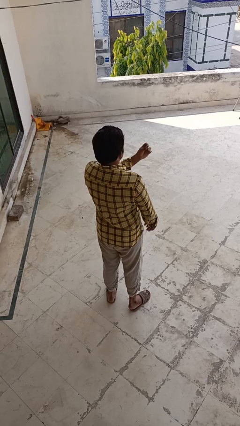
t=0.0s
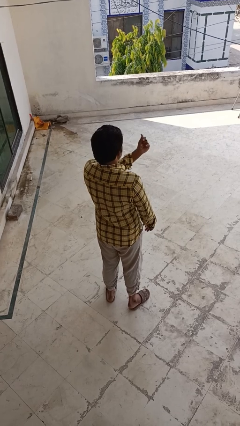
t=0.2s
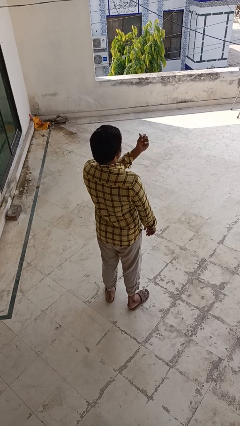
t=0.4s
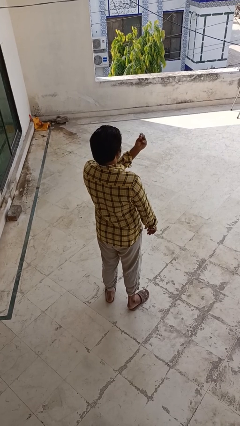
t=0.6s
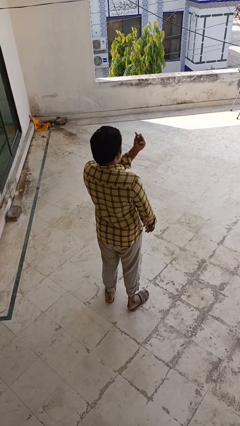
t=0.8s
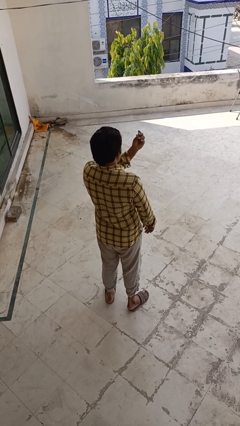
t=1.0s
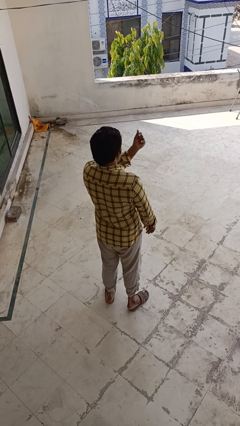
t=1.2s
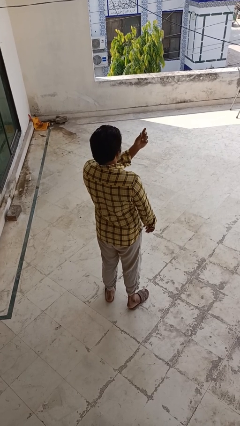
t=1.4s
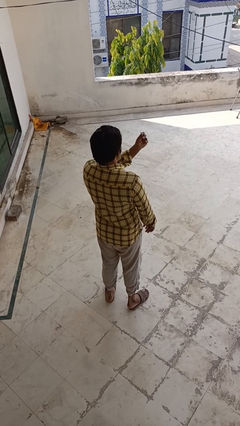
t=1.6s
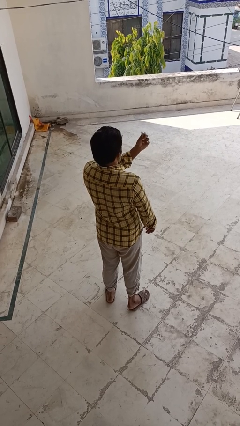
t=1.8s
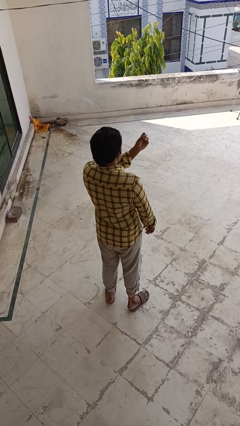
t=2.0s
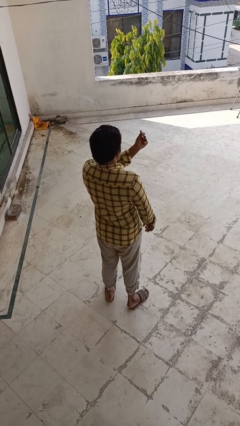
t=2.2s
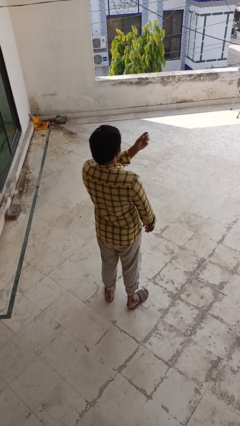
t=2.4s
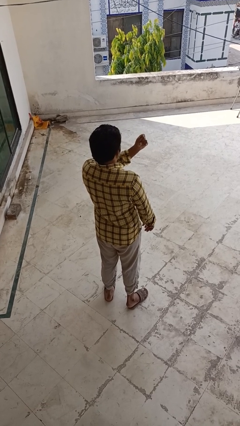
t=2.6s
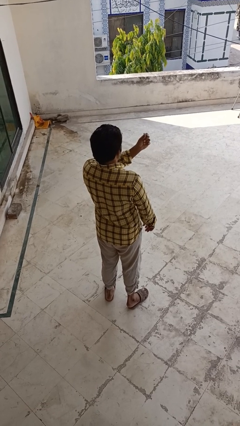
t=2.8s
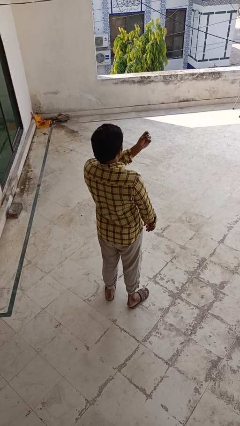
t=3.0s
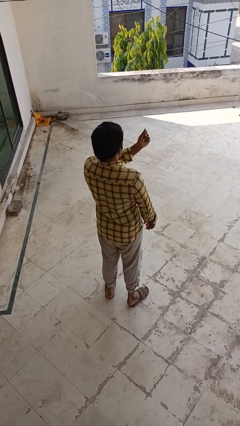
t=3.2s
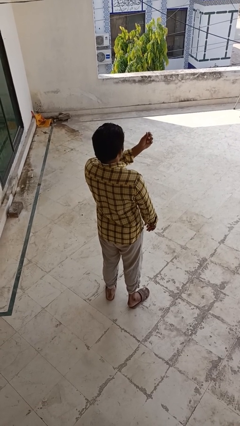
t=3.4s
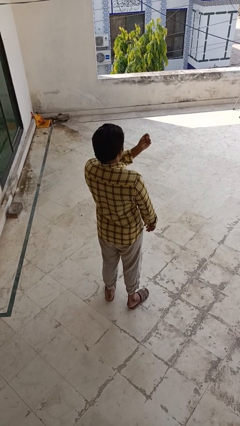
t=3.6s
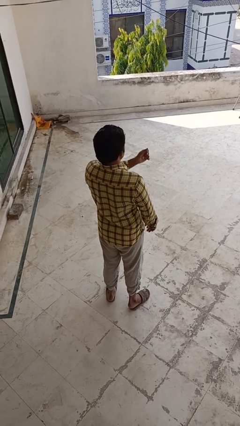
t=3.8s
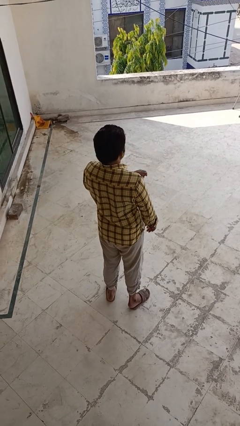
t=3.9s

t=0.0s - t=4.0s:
person snaps fingers

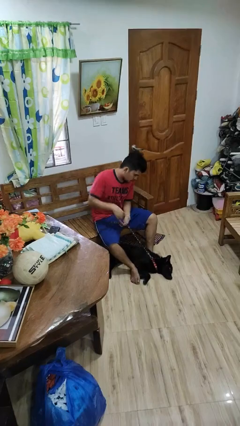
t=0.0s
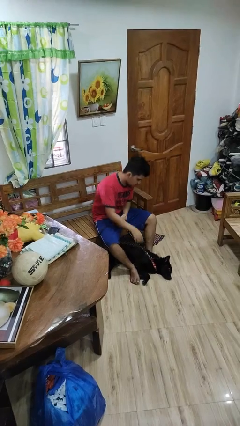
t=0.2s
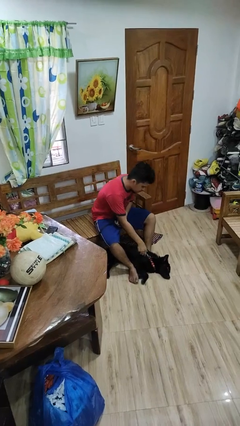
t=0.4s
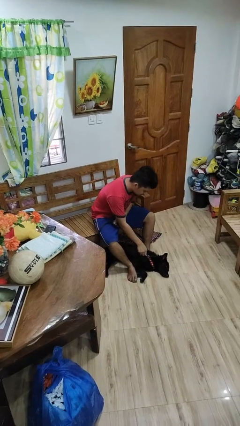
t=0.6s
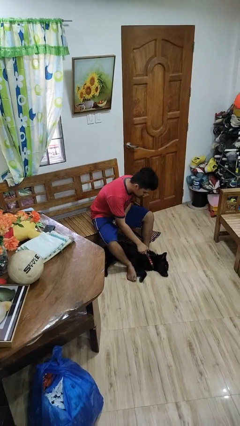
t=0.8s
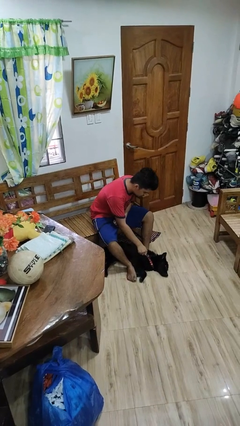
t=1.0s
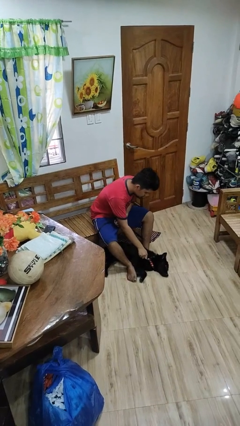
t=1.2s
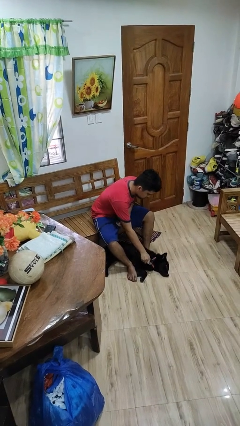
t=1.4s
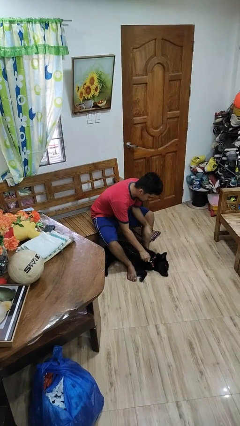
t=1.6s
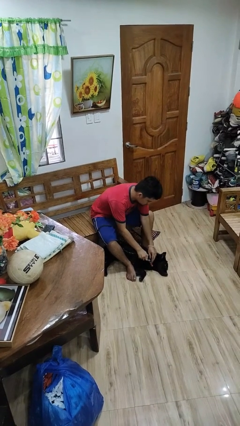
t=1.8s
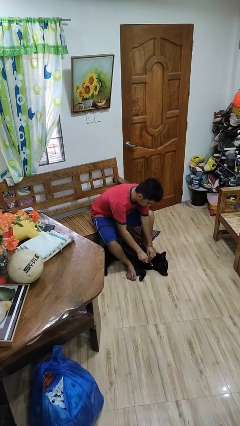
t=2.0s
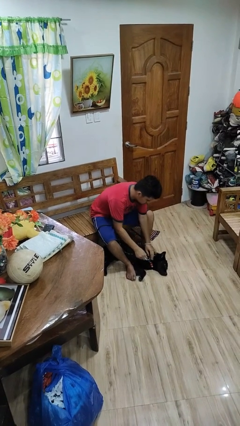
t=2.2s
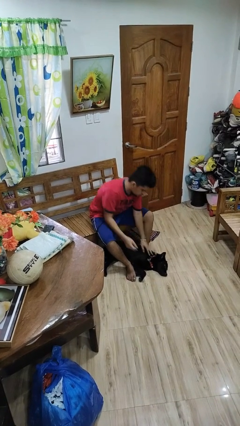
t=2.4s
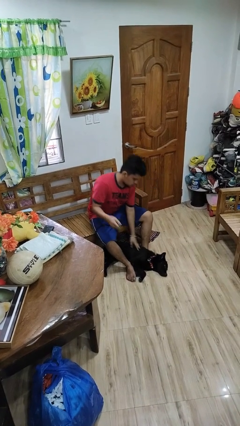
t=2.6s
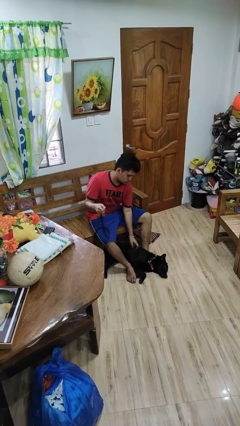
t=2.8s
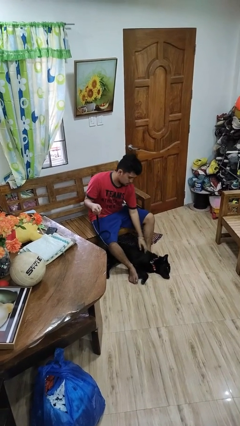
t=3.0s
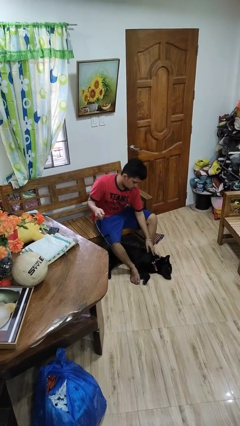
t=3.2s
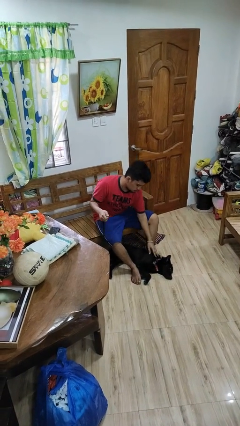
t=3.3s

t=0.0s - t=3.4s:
person unattaches leash from dog

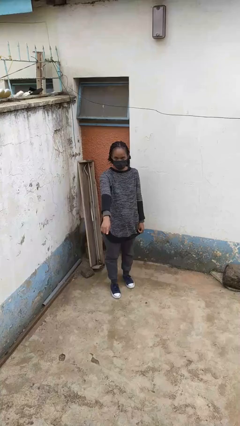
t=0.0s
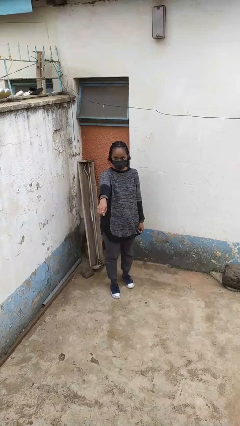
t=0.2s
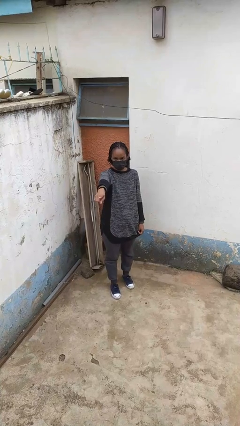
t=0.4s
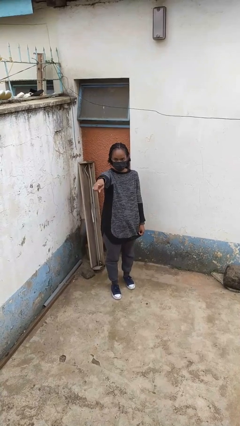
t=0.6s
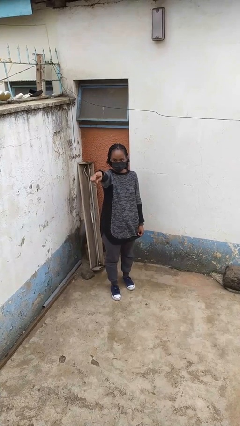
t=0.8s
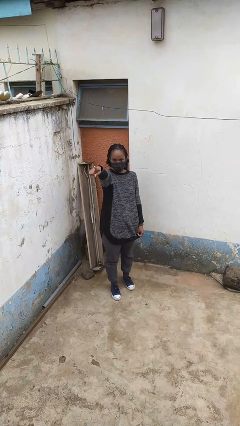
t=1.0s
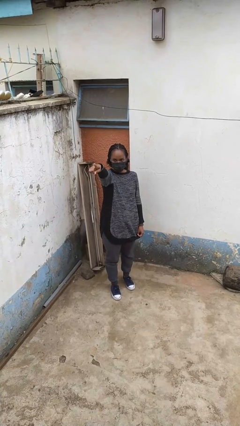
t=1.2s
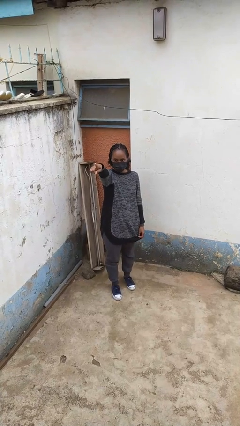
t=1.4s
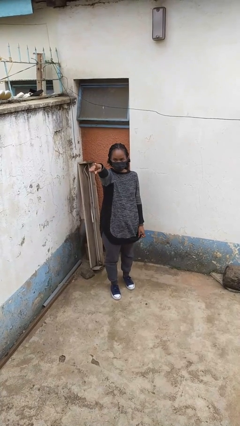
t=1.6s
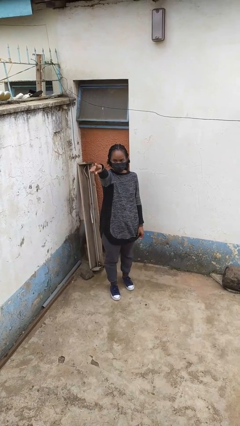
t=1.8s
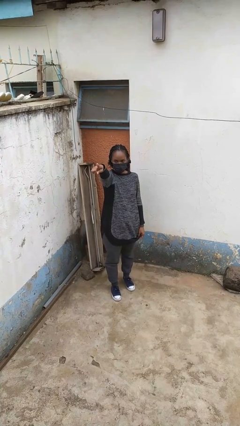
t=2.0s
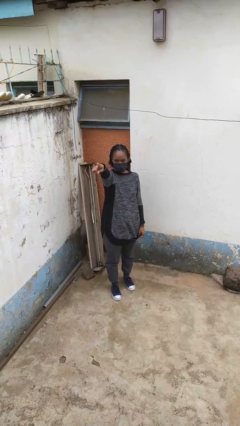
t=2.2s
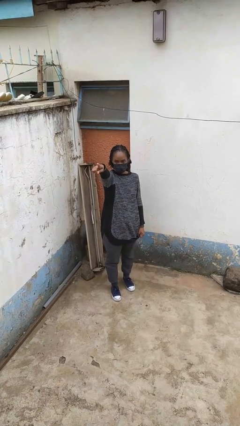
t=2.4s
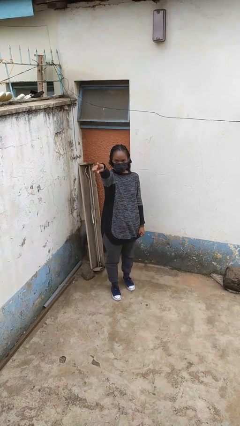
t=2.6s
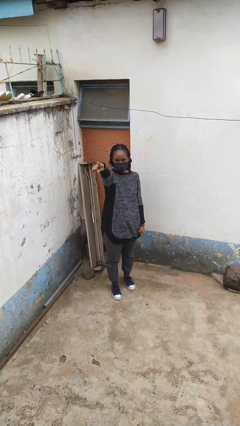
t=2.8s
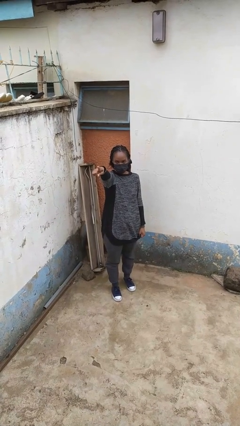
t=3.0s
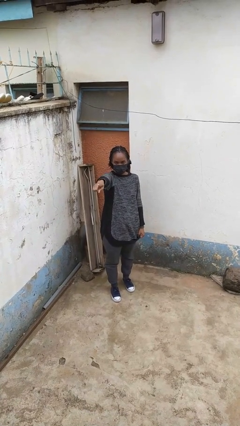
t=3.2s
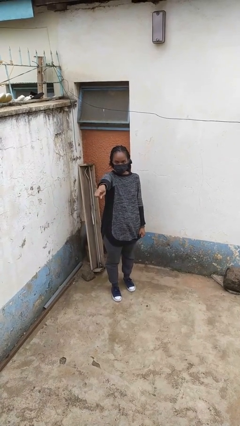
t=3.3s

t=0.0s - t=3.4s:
person points at person

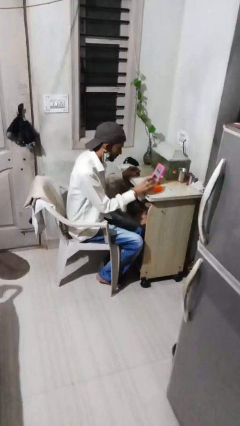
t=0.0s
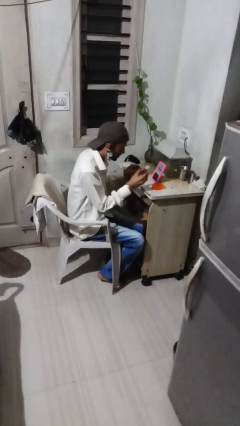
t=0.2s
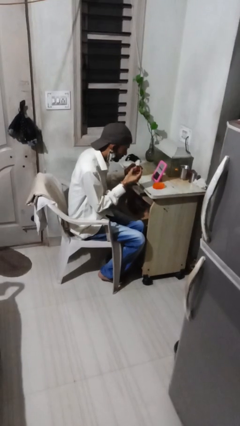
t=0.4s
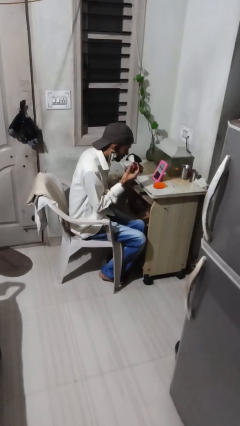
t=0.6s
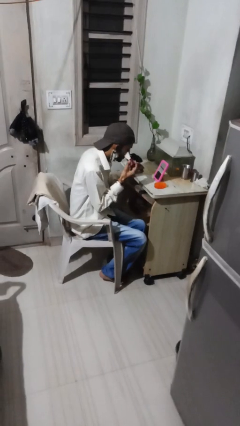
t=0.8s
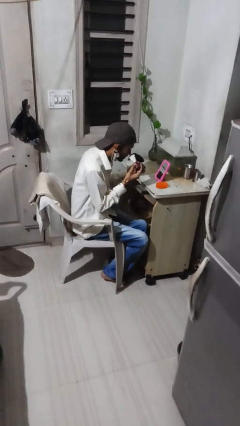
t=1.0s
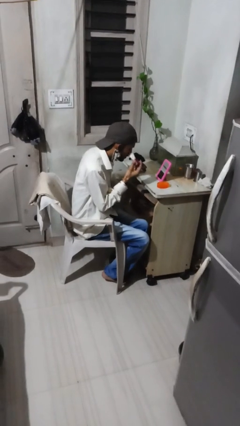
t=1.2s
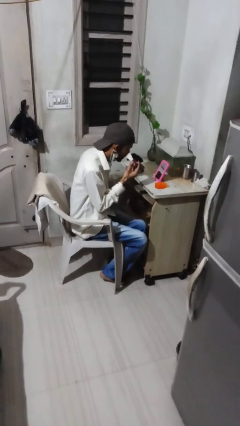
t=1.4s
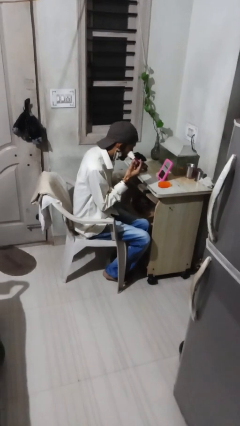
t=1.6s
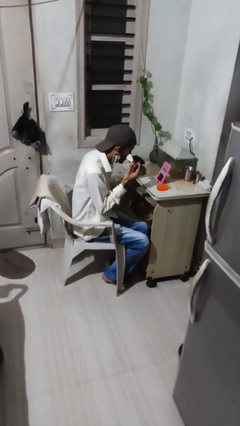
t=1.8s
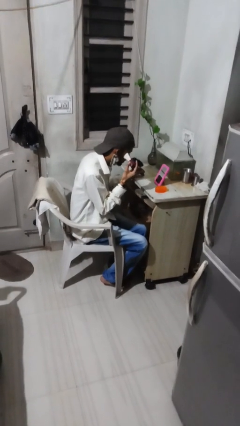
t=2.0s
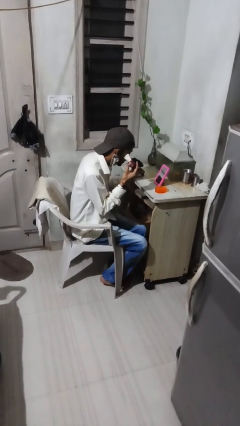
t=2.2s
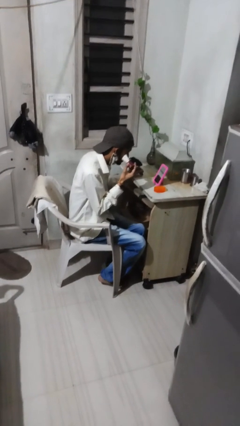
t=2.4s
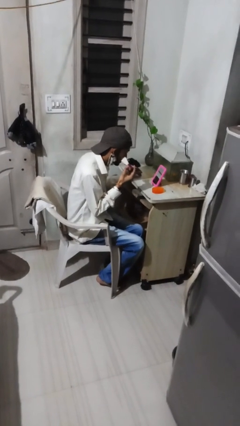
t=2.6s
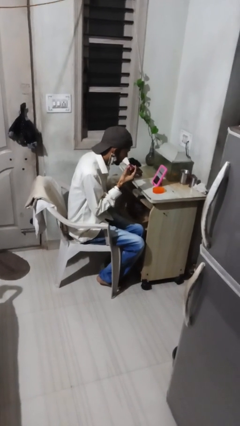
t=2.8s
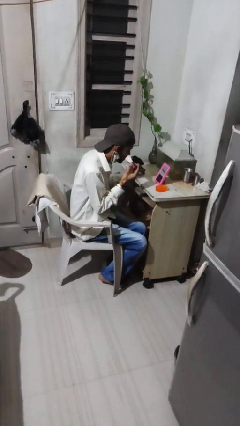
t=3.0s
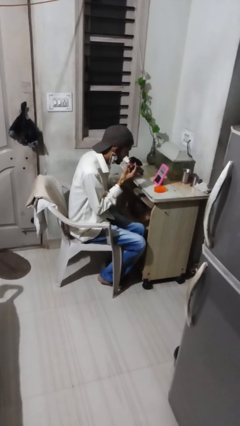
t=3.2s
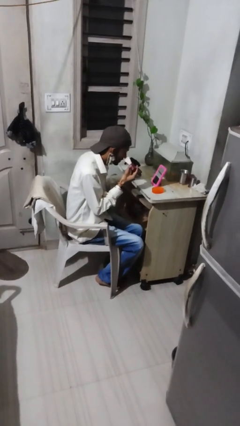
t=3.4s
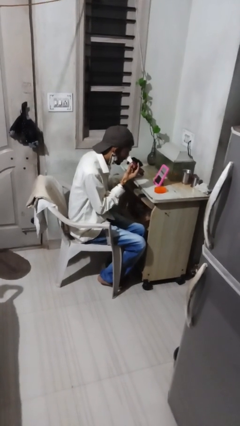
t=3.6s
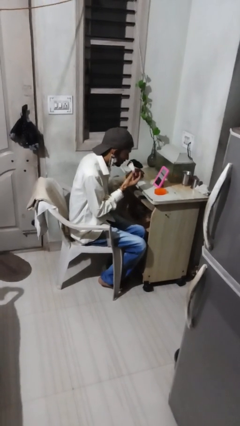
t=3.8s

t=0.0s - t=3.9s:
person applies foundation makeup

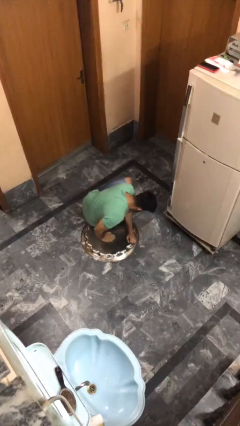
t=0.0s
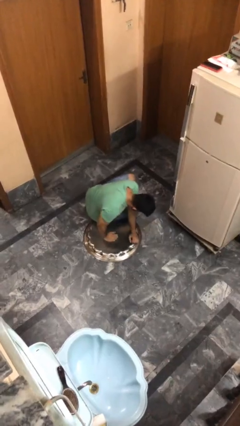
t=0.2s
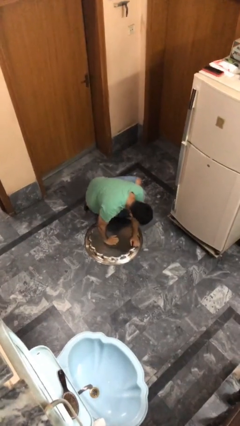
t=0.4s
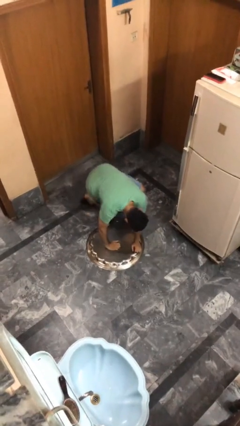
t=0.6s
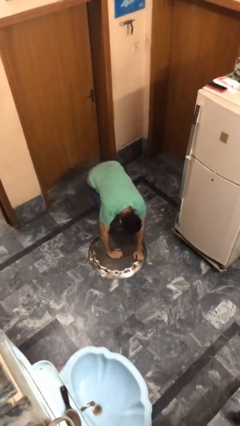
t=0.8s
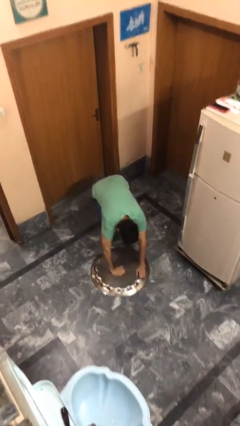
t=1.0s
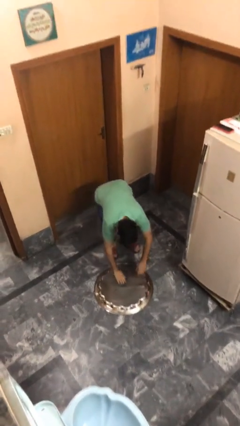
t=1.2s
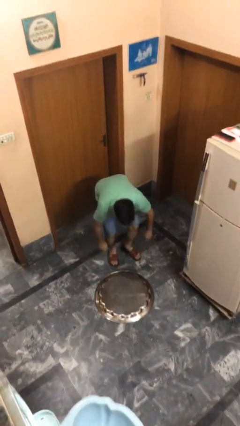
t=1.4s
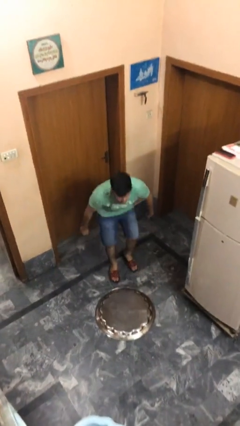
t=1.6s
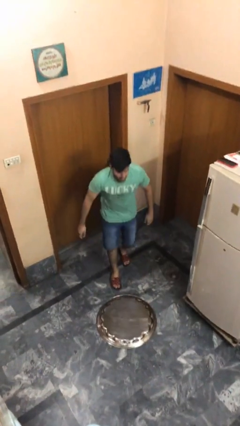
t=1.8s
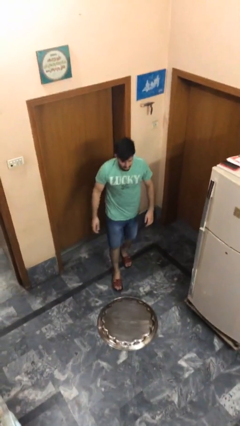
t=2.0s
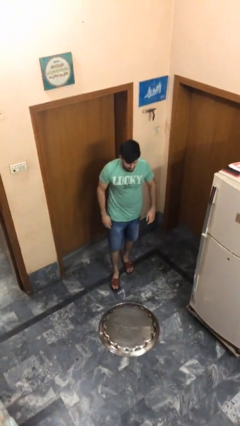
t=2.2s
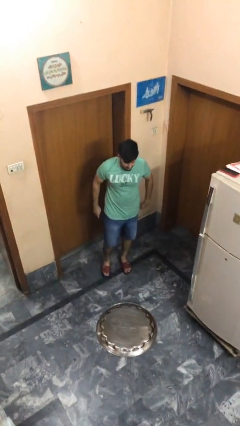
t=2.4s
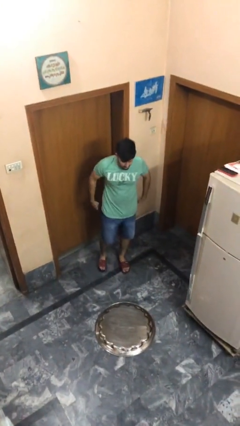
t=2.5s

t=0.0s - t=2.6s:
person stands up from floor

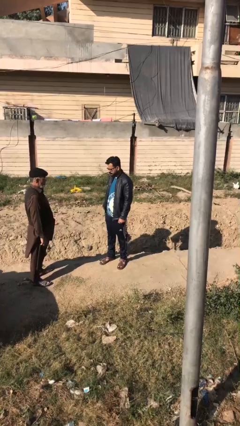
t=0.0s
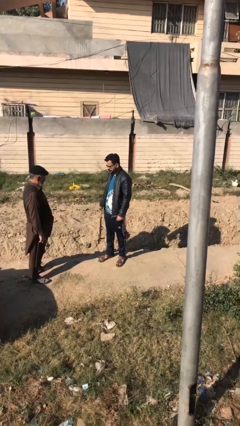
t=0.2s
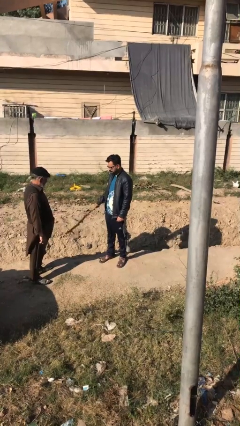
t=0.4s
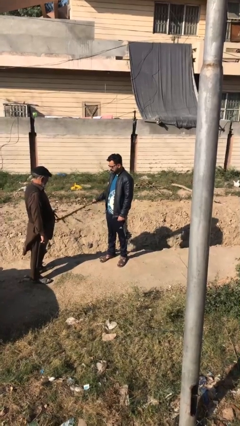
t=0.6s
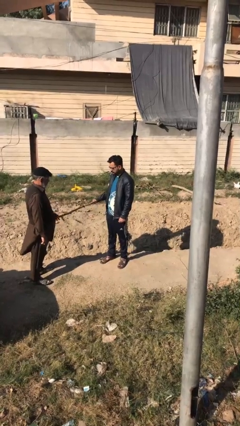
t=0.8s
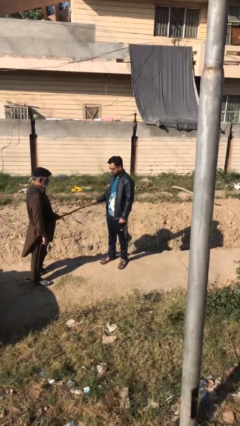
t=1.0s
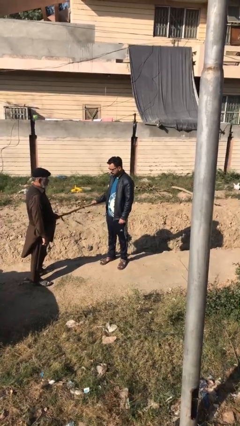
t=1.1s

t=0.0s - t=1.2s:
person transfers object to person
